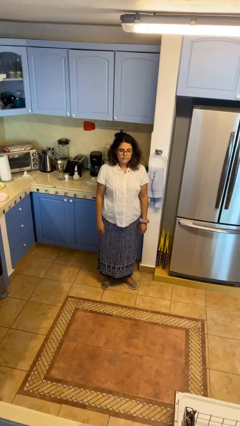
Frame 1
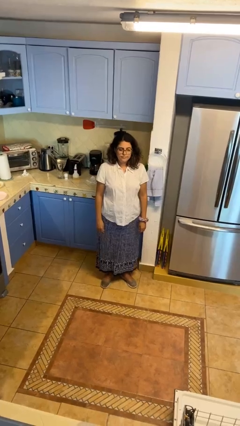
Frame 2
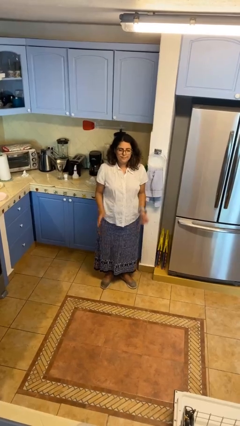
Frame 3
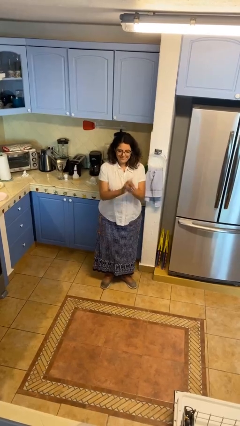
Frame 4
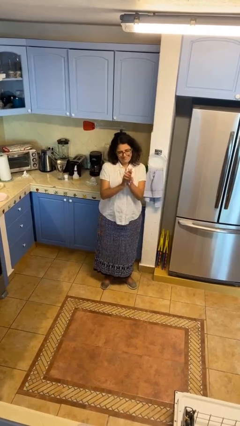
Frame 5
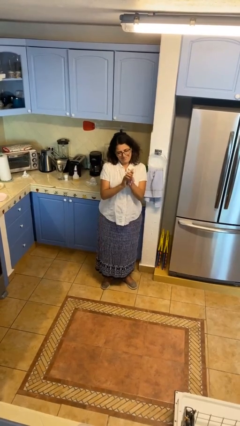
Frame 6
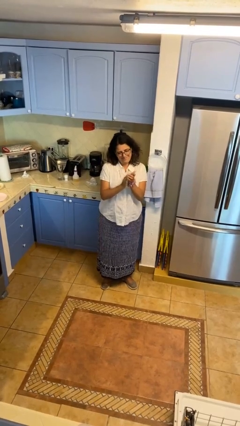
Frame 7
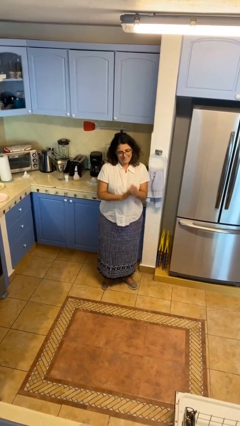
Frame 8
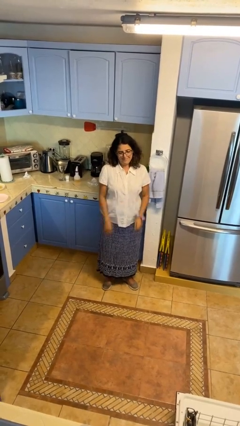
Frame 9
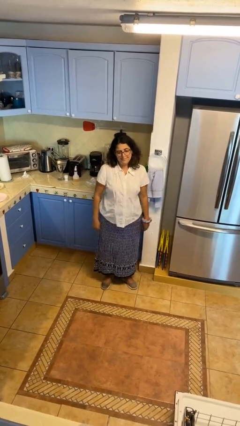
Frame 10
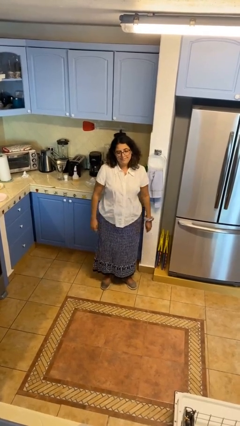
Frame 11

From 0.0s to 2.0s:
person claps hands

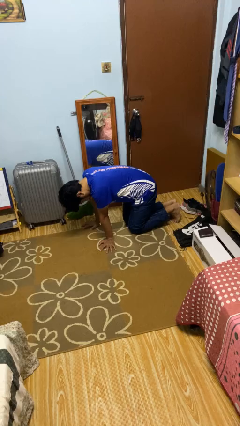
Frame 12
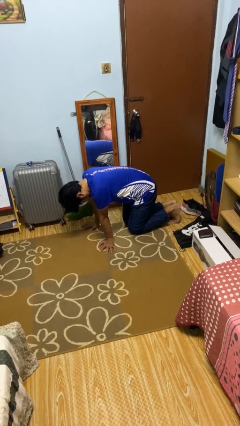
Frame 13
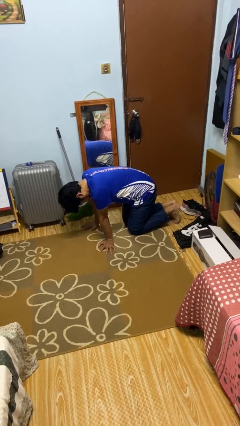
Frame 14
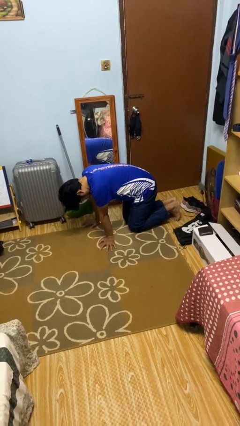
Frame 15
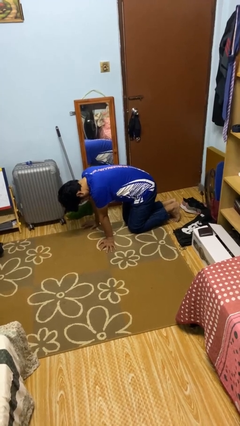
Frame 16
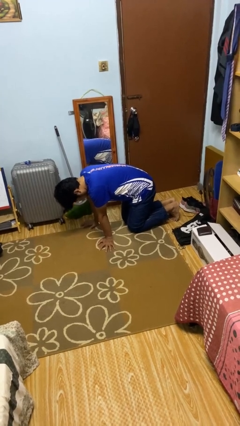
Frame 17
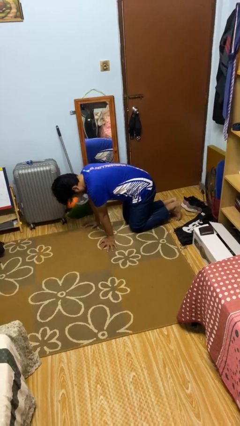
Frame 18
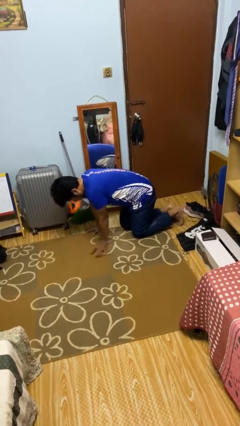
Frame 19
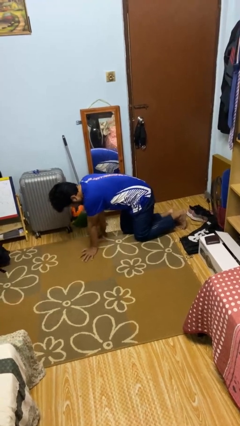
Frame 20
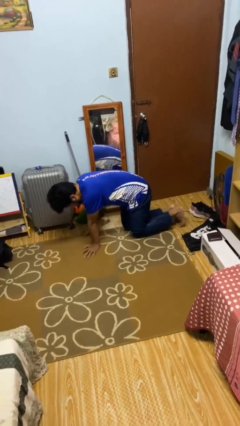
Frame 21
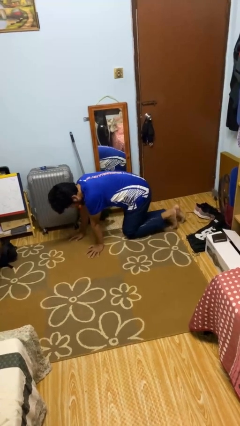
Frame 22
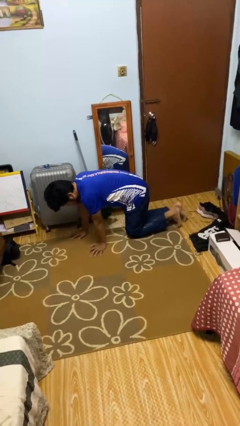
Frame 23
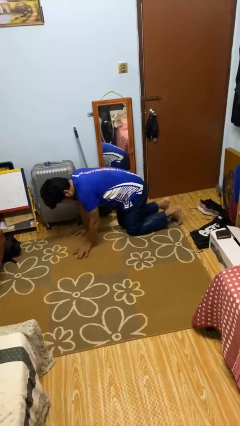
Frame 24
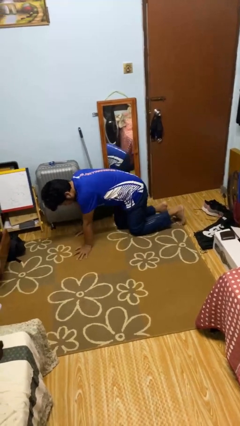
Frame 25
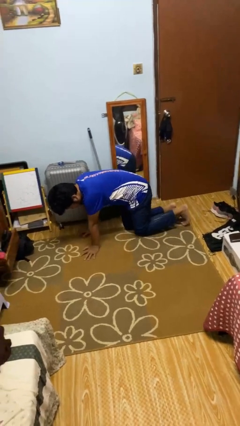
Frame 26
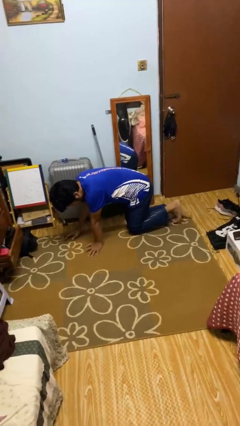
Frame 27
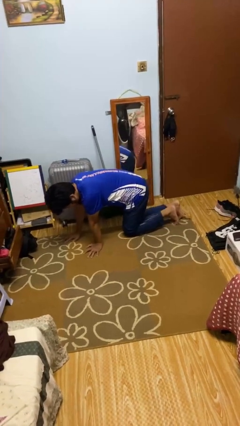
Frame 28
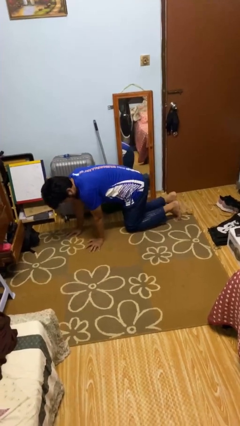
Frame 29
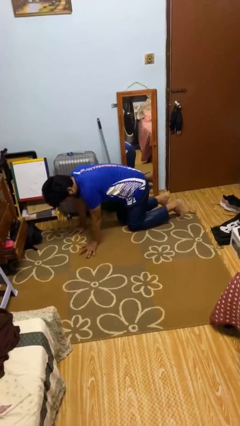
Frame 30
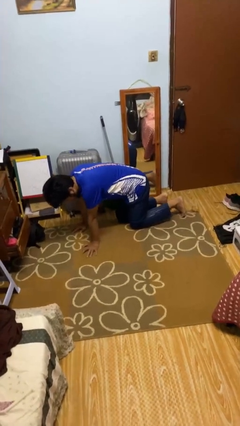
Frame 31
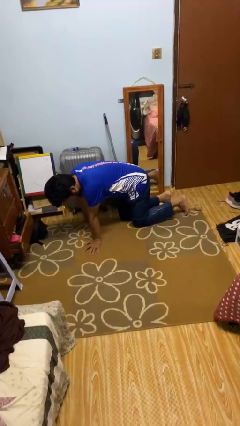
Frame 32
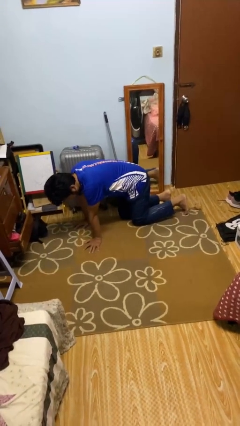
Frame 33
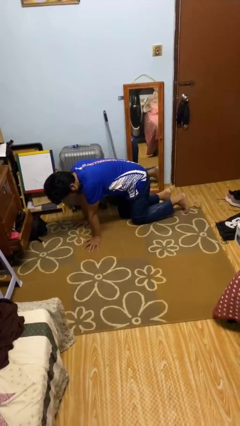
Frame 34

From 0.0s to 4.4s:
person crawls

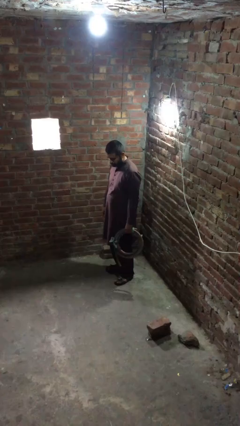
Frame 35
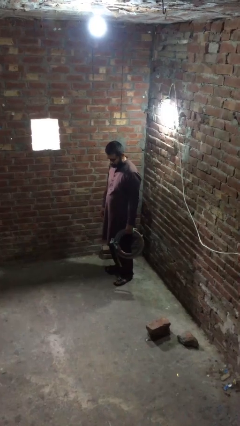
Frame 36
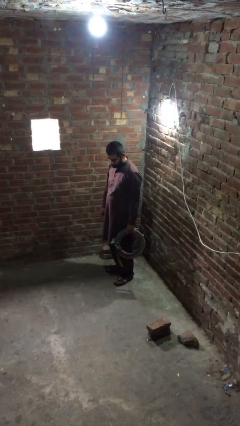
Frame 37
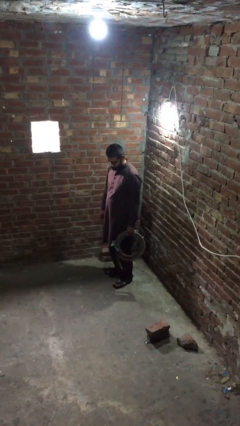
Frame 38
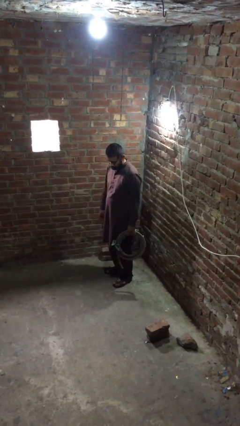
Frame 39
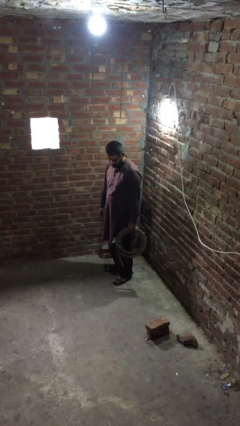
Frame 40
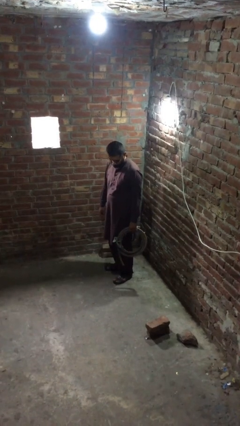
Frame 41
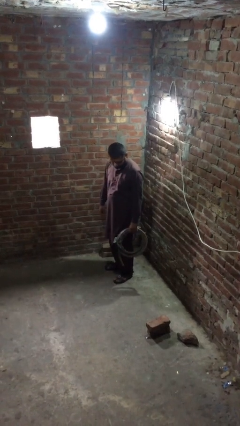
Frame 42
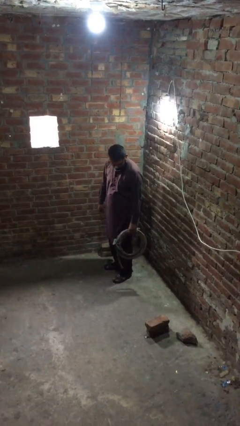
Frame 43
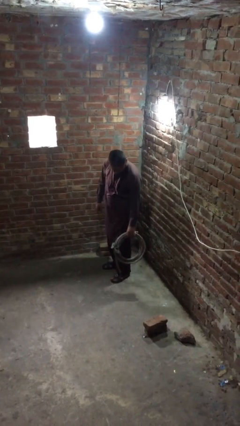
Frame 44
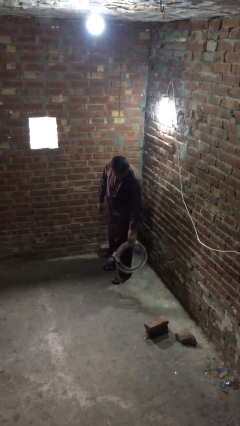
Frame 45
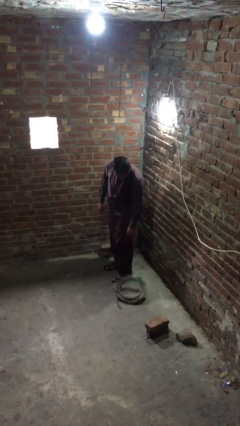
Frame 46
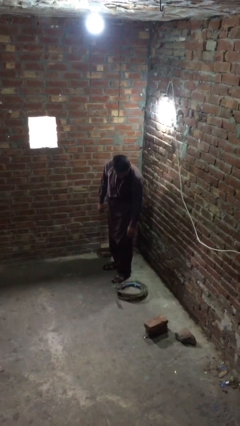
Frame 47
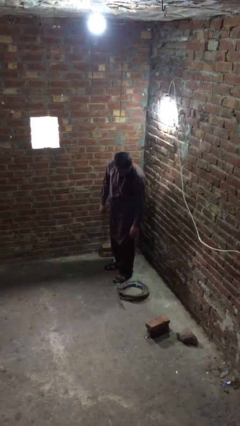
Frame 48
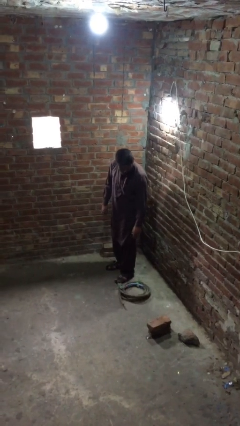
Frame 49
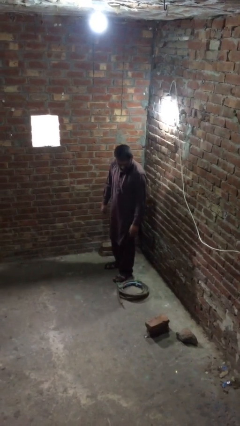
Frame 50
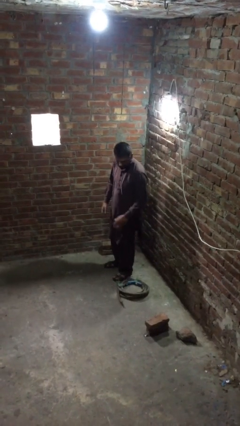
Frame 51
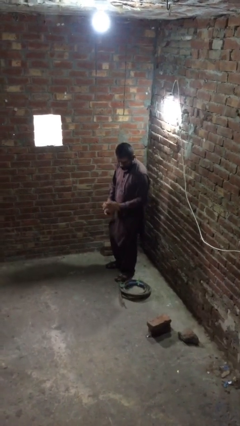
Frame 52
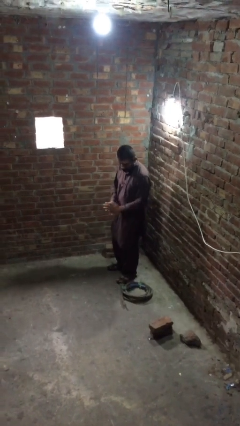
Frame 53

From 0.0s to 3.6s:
person puts down object on floor

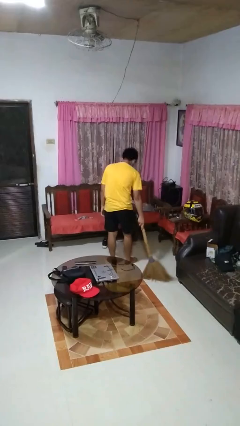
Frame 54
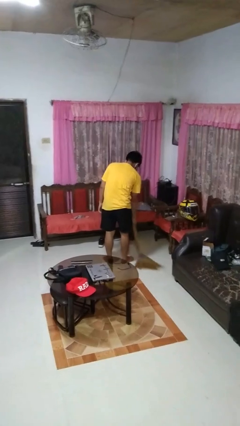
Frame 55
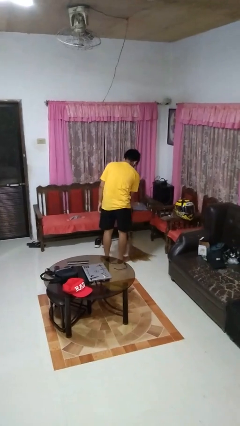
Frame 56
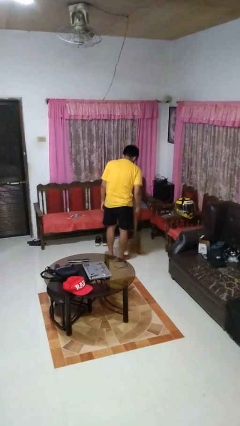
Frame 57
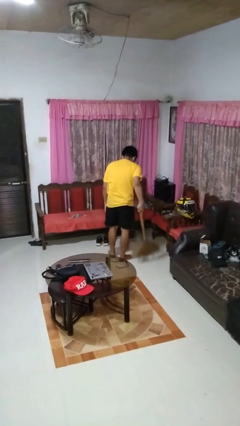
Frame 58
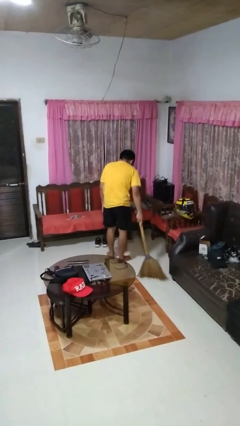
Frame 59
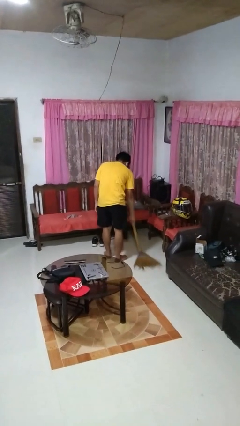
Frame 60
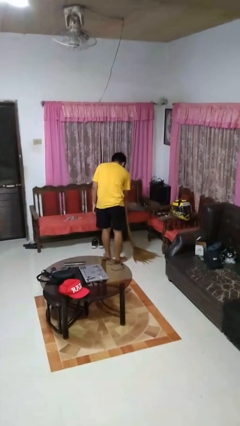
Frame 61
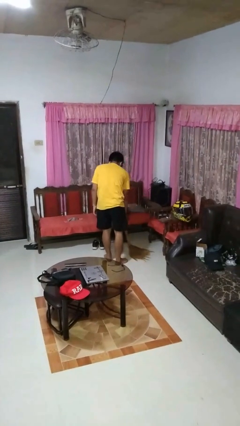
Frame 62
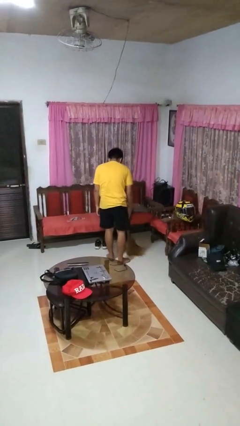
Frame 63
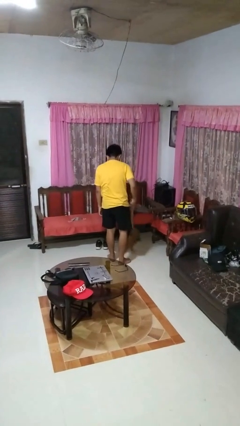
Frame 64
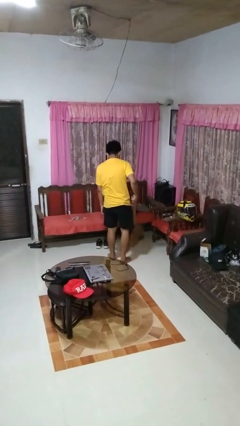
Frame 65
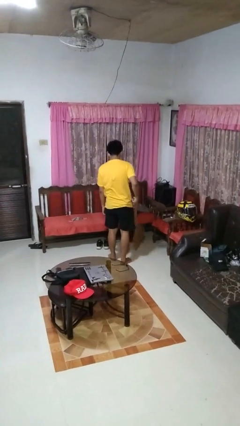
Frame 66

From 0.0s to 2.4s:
person sweeps floor

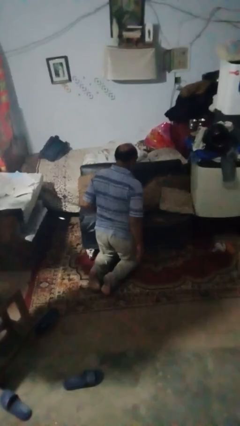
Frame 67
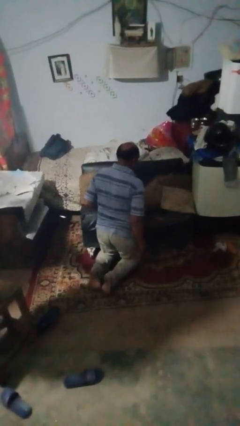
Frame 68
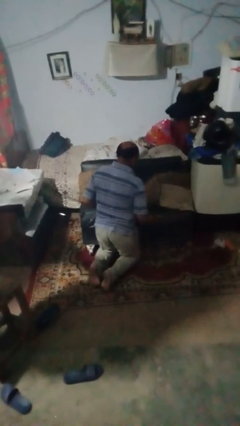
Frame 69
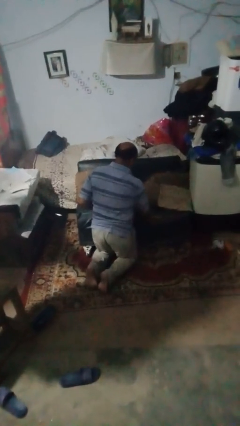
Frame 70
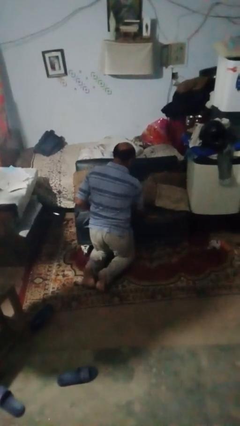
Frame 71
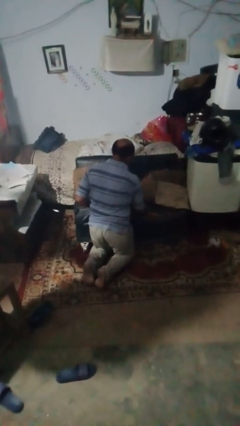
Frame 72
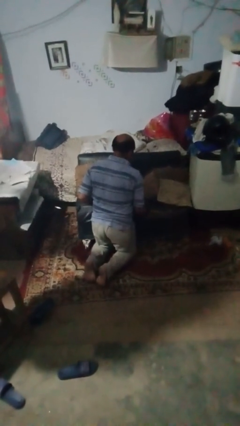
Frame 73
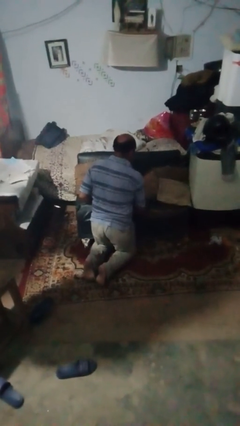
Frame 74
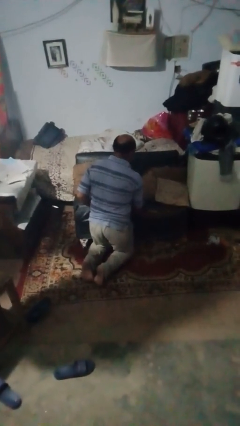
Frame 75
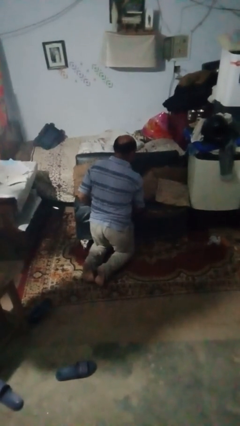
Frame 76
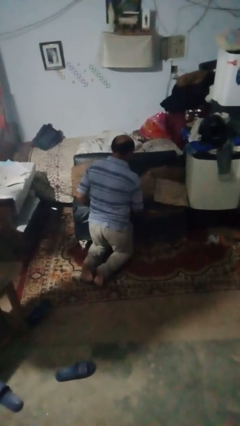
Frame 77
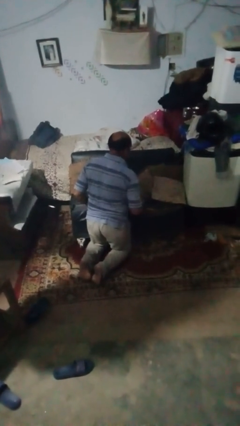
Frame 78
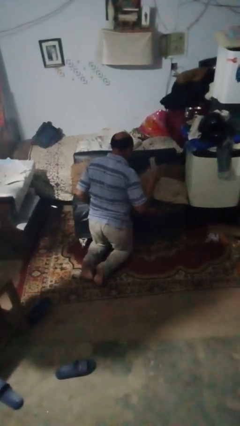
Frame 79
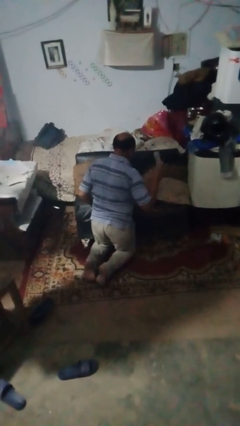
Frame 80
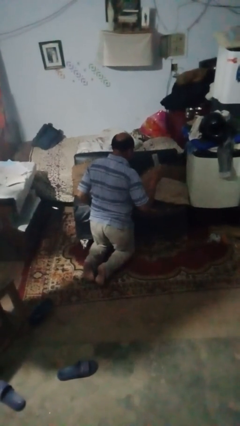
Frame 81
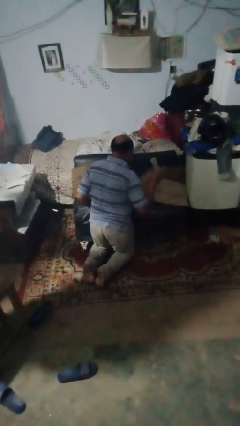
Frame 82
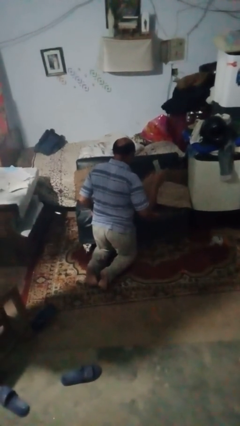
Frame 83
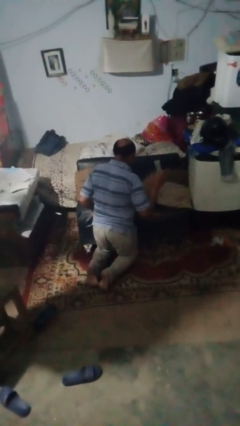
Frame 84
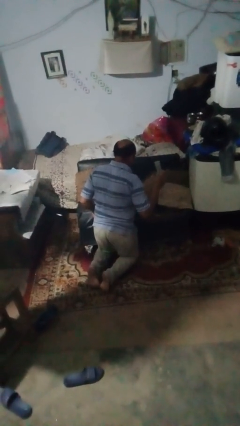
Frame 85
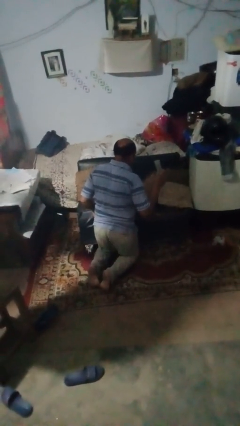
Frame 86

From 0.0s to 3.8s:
person searches in couch

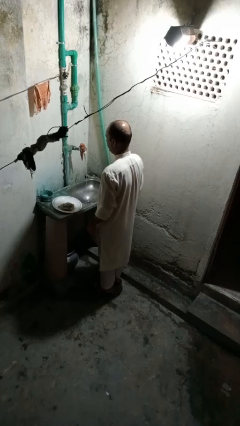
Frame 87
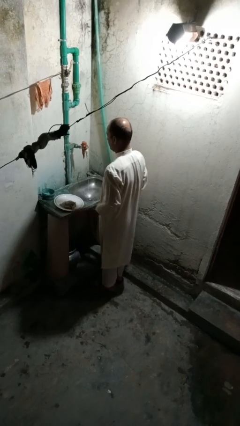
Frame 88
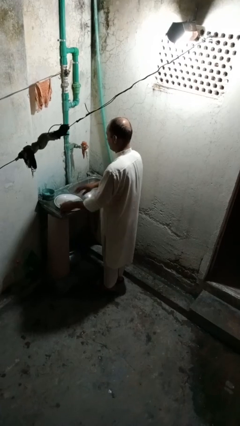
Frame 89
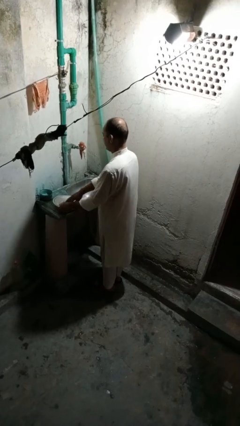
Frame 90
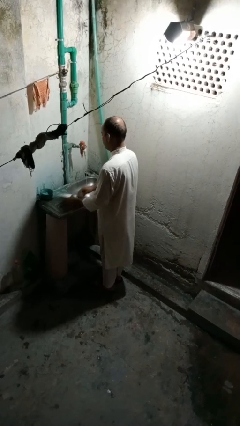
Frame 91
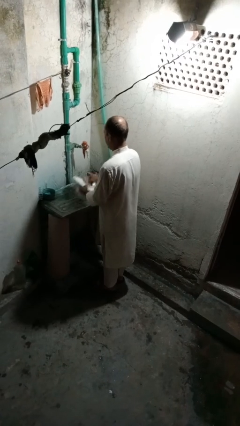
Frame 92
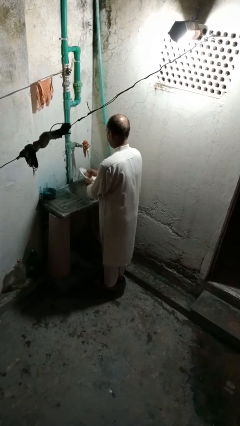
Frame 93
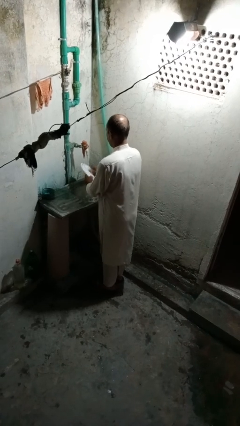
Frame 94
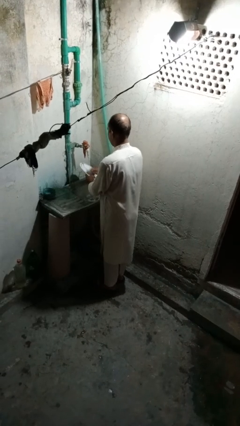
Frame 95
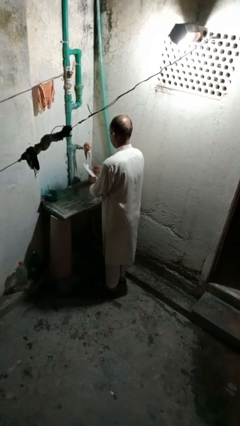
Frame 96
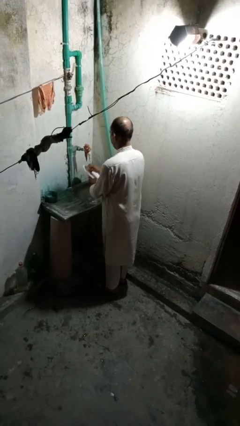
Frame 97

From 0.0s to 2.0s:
person washes dish
